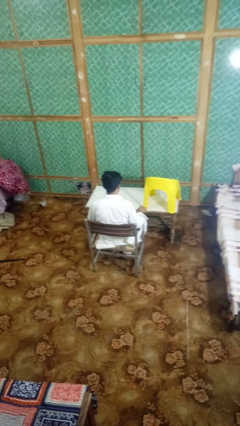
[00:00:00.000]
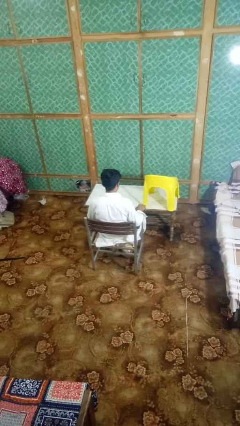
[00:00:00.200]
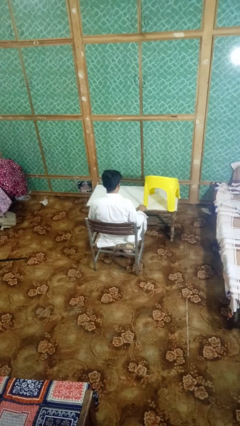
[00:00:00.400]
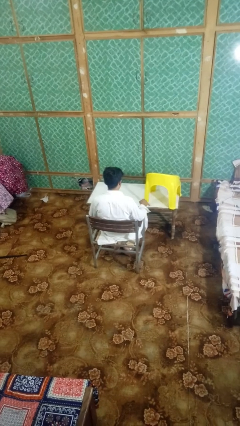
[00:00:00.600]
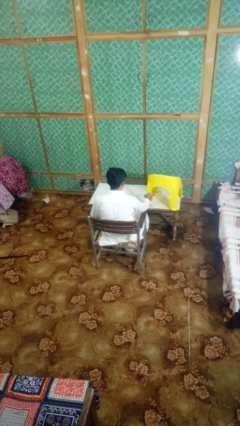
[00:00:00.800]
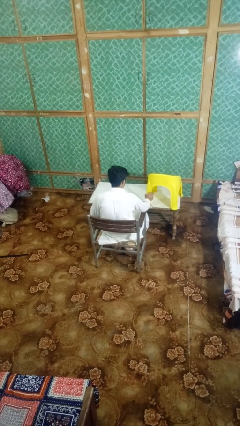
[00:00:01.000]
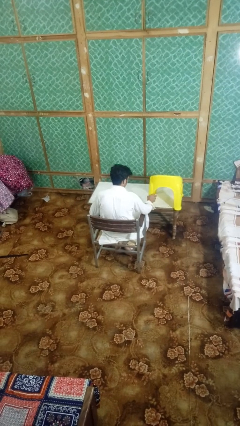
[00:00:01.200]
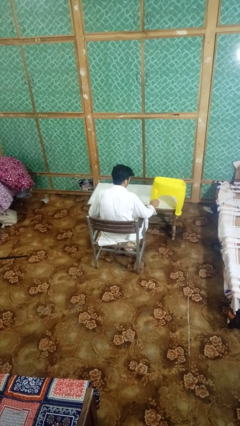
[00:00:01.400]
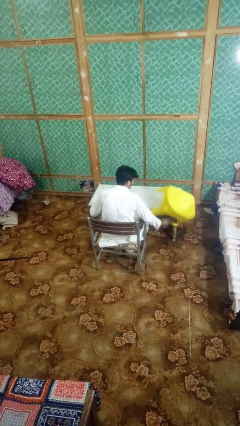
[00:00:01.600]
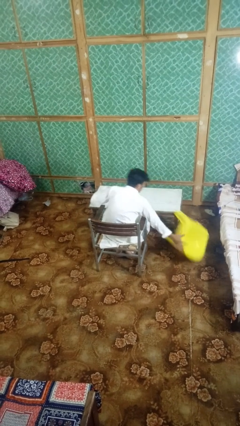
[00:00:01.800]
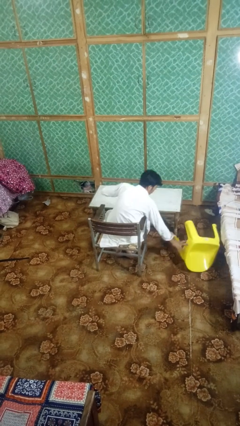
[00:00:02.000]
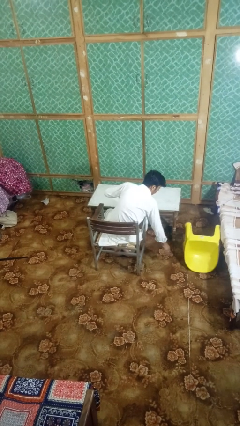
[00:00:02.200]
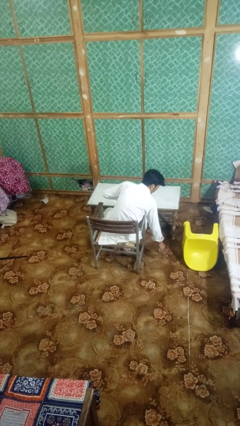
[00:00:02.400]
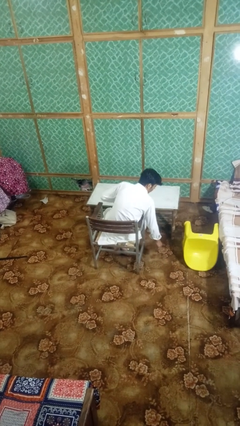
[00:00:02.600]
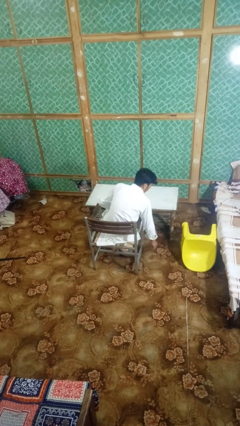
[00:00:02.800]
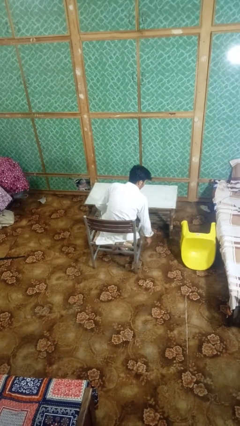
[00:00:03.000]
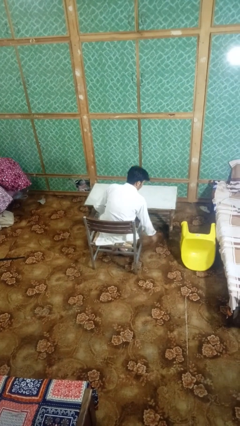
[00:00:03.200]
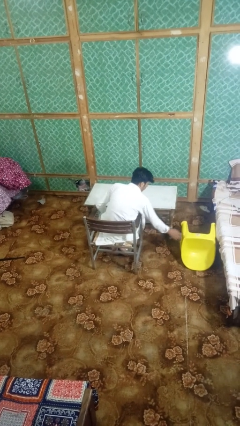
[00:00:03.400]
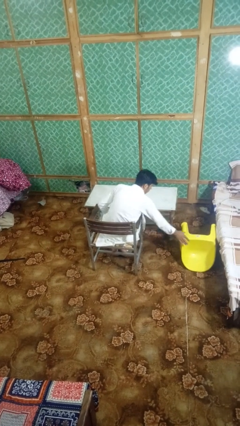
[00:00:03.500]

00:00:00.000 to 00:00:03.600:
person knocks over furniture

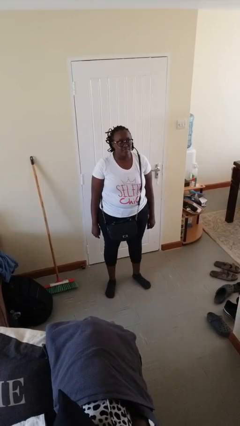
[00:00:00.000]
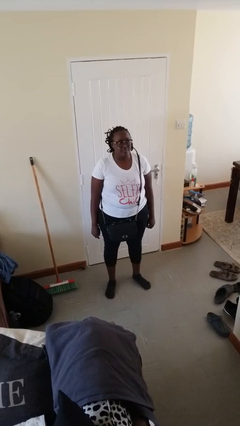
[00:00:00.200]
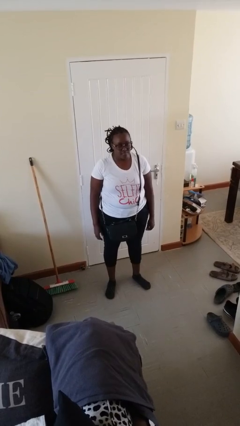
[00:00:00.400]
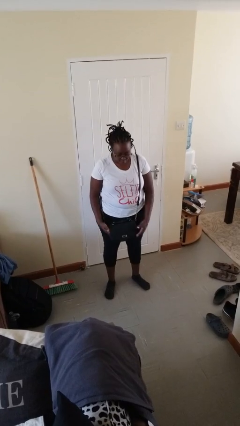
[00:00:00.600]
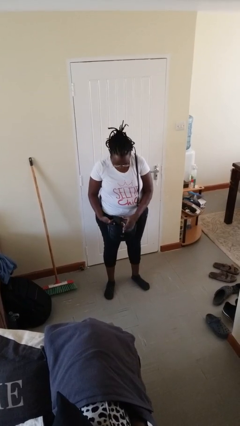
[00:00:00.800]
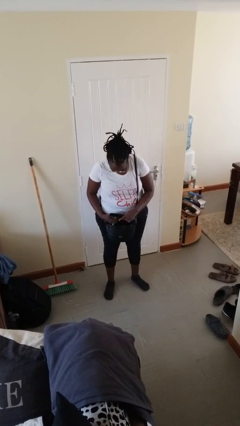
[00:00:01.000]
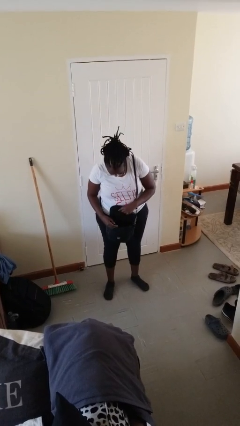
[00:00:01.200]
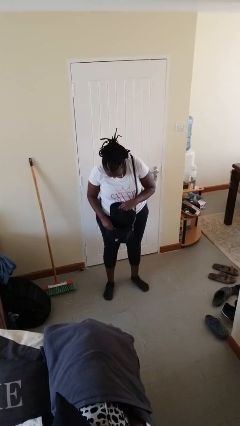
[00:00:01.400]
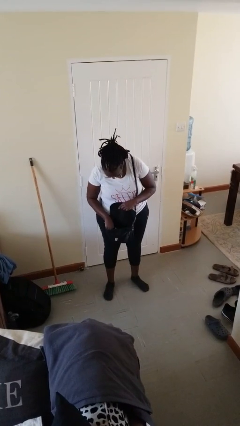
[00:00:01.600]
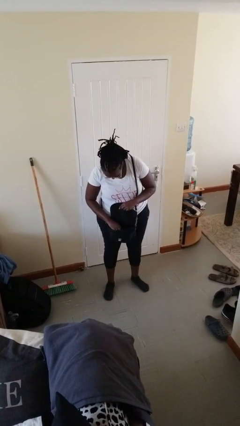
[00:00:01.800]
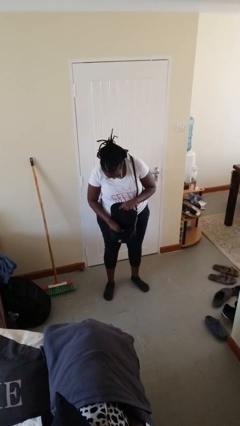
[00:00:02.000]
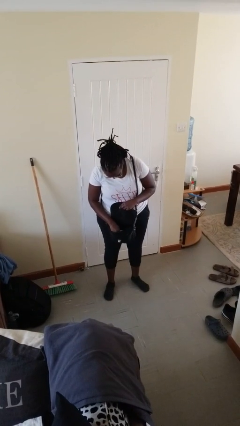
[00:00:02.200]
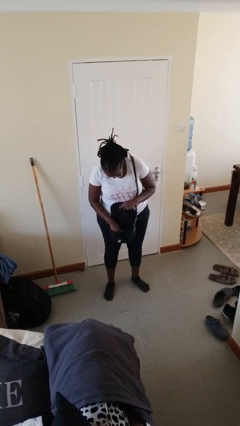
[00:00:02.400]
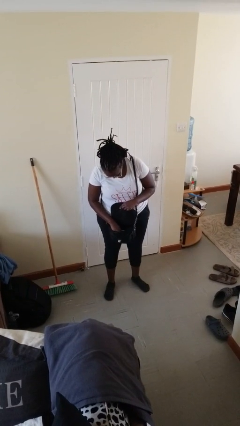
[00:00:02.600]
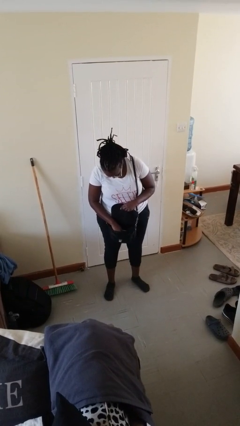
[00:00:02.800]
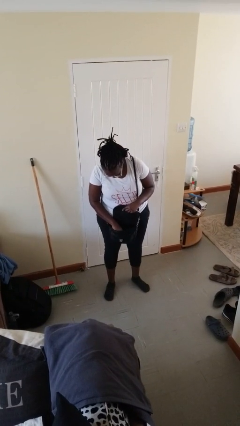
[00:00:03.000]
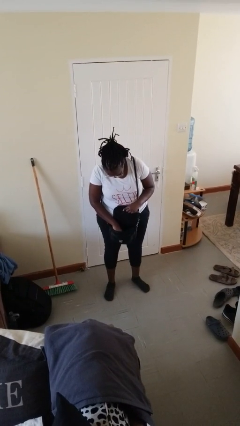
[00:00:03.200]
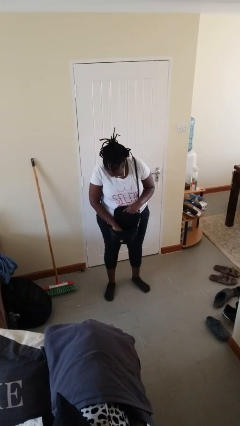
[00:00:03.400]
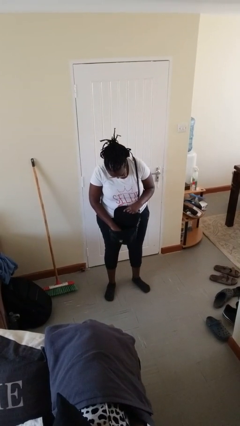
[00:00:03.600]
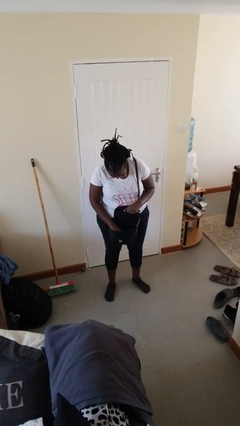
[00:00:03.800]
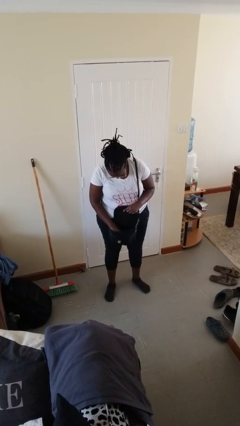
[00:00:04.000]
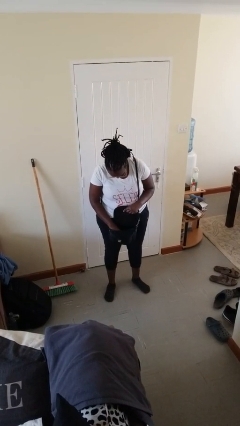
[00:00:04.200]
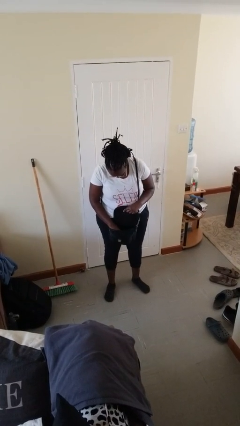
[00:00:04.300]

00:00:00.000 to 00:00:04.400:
person searches in purse

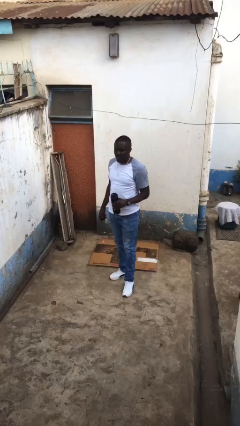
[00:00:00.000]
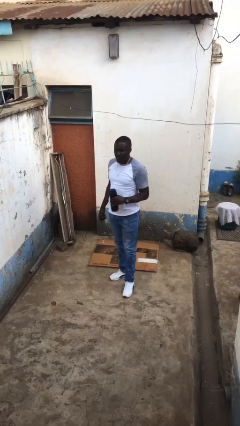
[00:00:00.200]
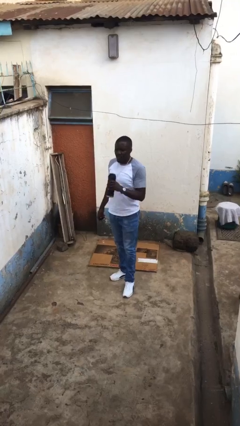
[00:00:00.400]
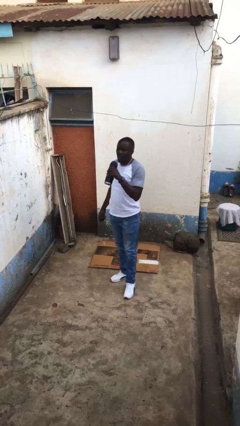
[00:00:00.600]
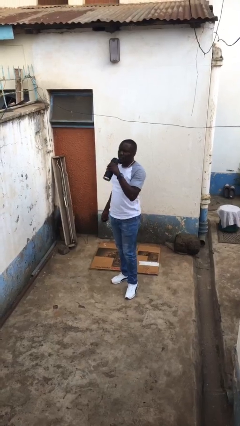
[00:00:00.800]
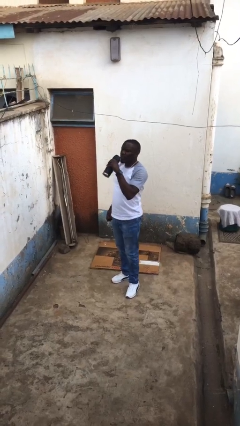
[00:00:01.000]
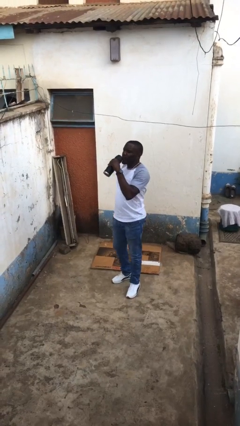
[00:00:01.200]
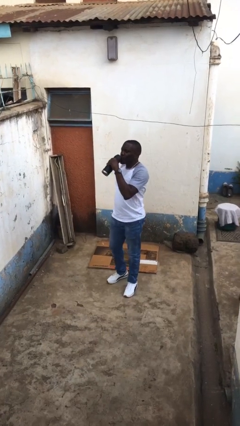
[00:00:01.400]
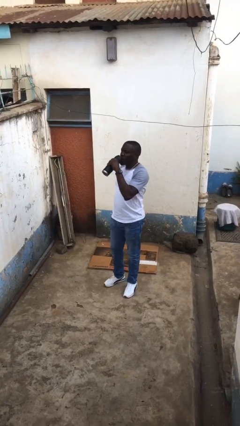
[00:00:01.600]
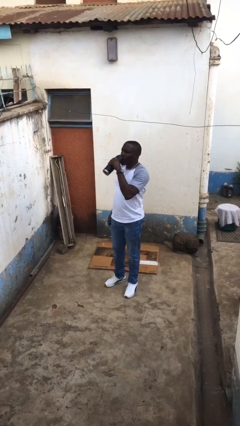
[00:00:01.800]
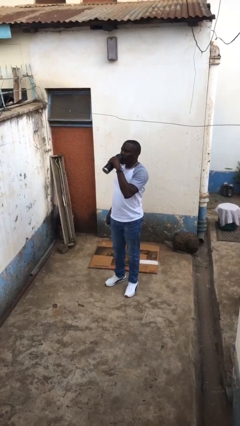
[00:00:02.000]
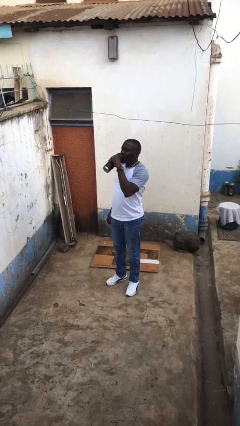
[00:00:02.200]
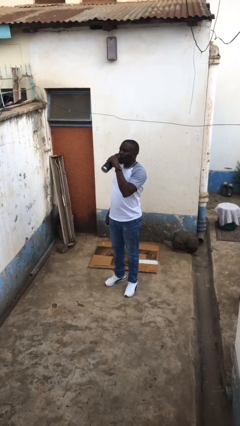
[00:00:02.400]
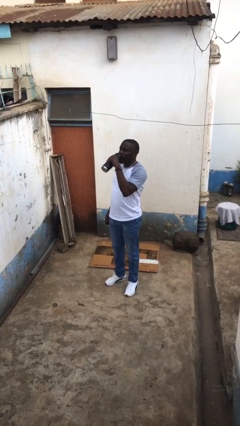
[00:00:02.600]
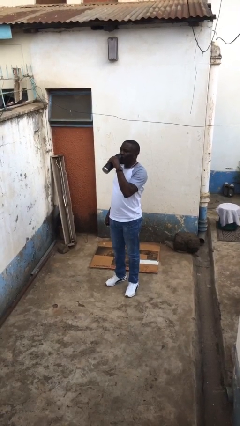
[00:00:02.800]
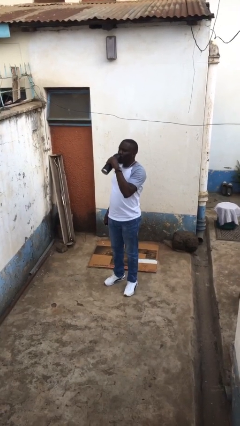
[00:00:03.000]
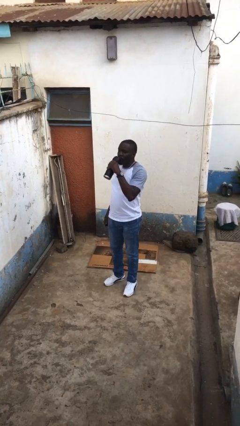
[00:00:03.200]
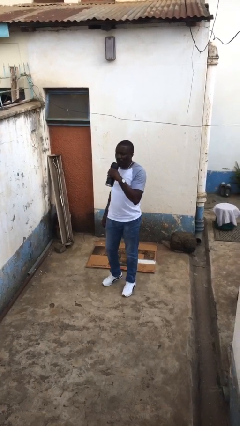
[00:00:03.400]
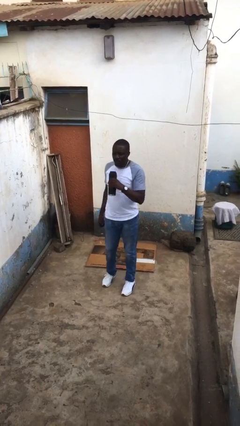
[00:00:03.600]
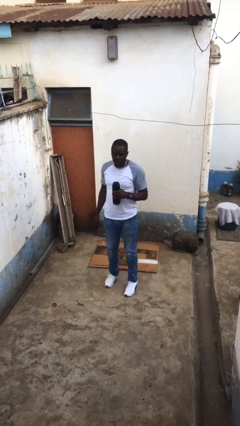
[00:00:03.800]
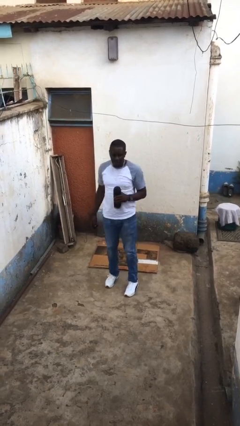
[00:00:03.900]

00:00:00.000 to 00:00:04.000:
person drinks from bottle

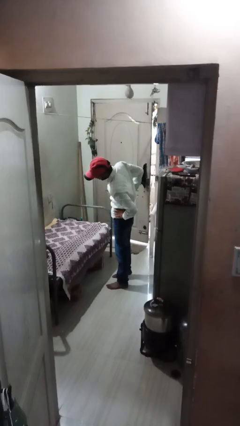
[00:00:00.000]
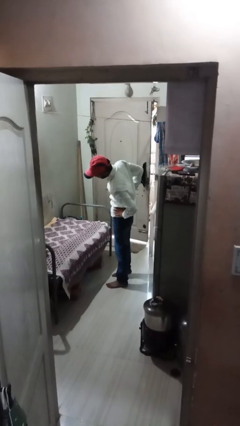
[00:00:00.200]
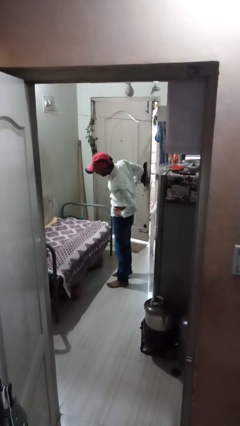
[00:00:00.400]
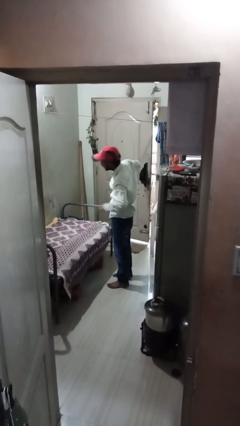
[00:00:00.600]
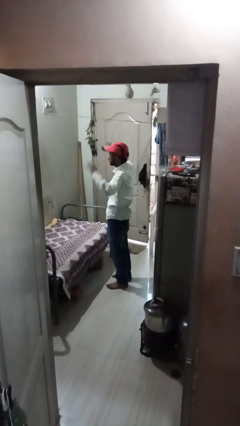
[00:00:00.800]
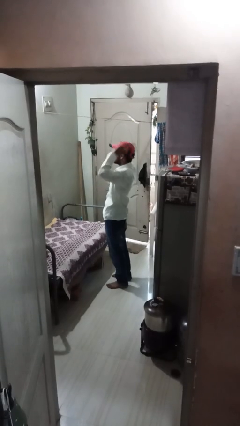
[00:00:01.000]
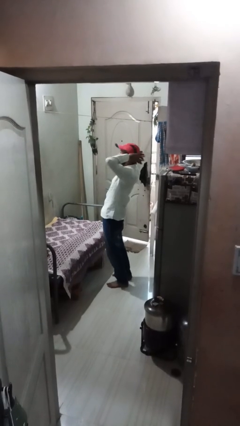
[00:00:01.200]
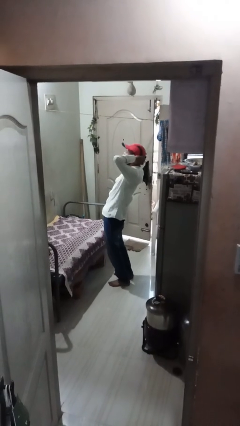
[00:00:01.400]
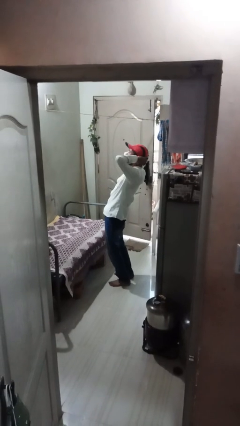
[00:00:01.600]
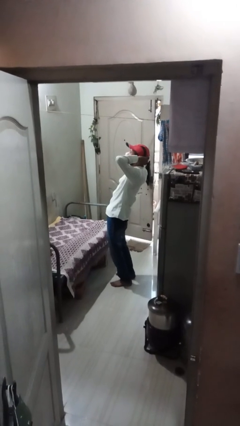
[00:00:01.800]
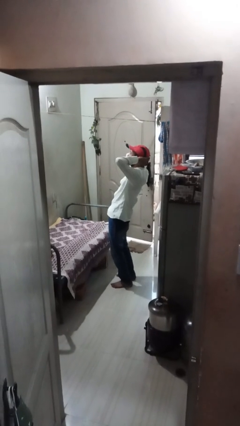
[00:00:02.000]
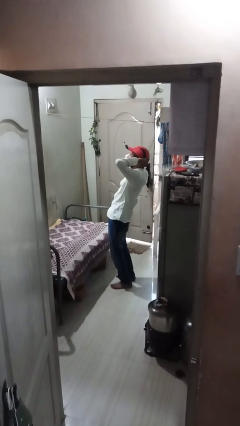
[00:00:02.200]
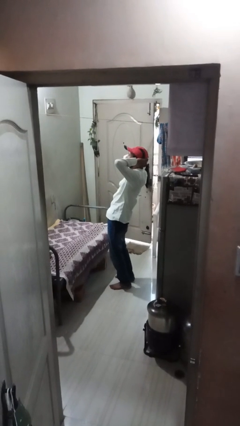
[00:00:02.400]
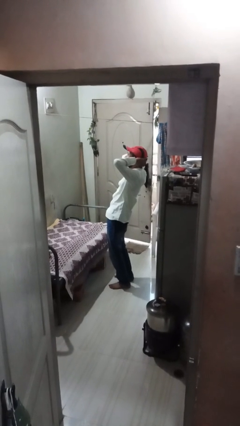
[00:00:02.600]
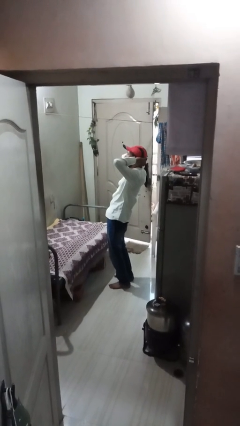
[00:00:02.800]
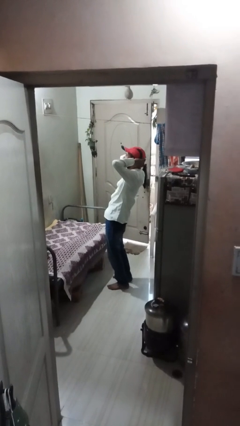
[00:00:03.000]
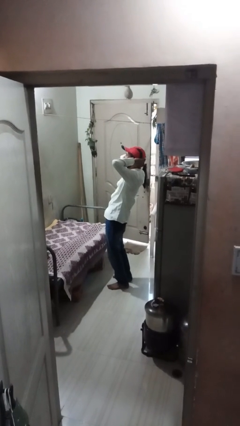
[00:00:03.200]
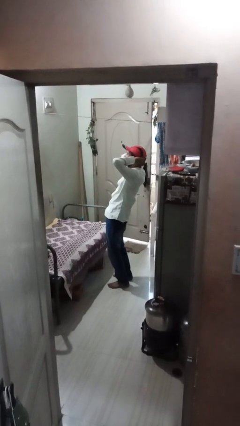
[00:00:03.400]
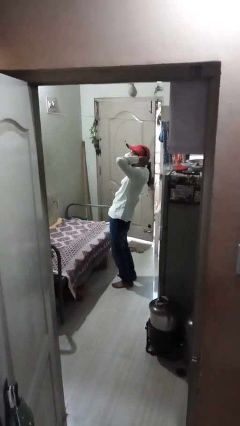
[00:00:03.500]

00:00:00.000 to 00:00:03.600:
person stretches arms over head

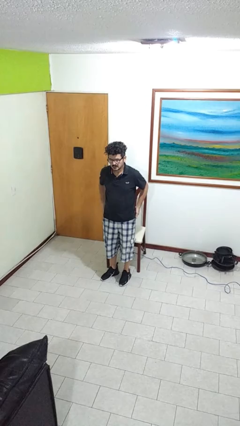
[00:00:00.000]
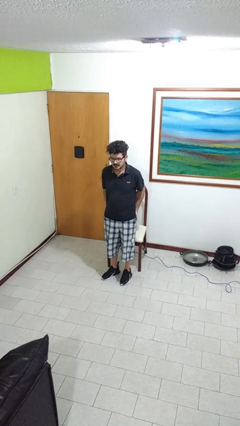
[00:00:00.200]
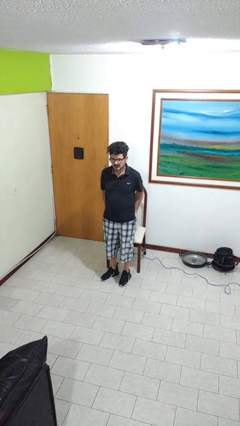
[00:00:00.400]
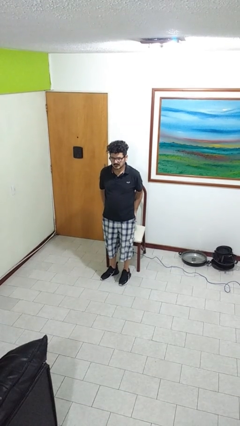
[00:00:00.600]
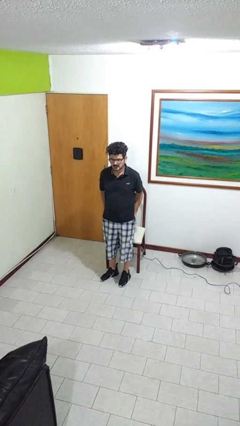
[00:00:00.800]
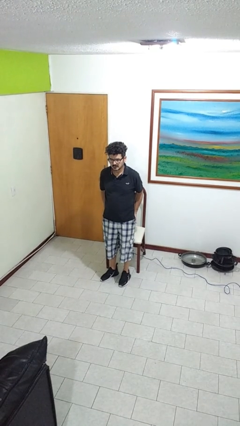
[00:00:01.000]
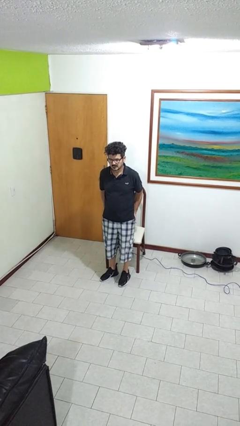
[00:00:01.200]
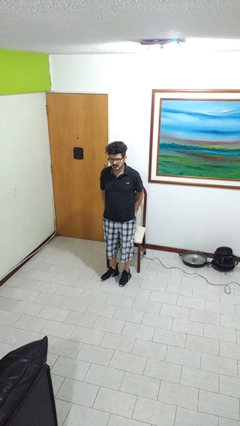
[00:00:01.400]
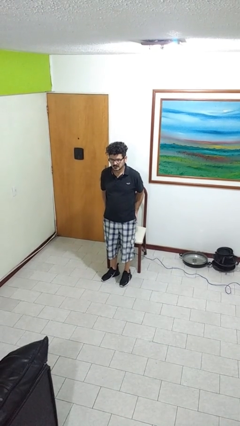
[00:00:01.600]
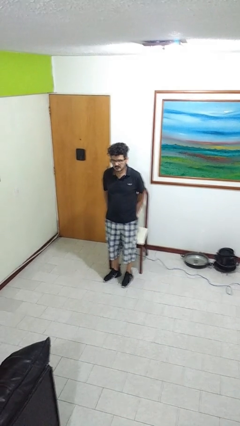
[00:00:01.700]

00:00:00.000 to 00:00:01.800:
person puts hands in back pockets
